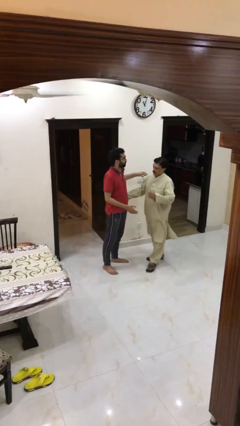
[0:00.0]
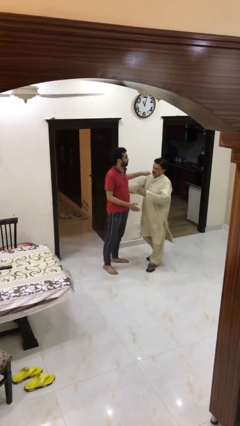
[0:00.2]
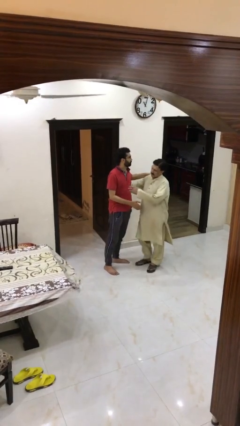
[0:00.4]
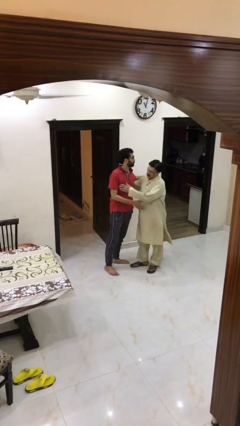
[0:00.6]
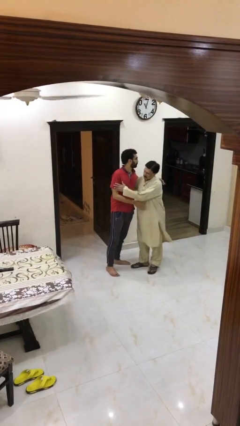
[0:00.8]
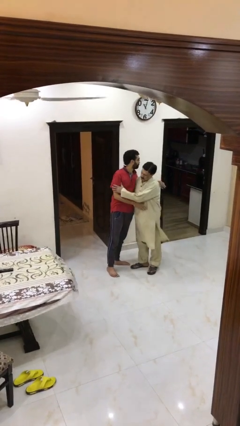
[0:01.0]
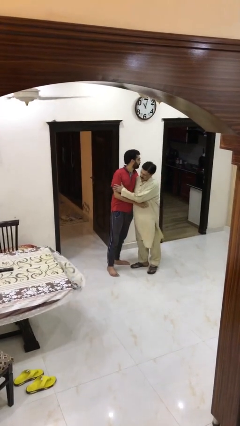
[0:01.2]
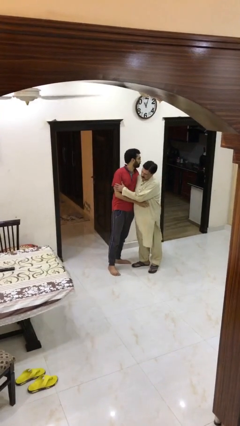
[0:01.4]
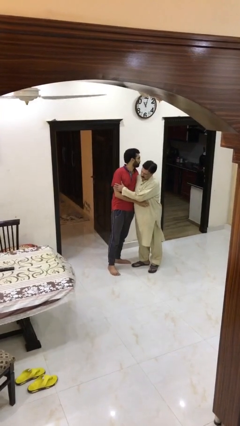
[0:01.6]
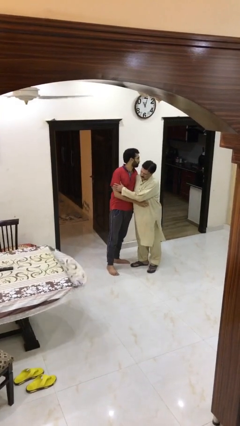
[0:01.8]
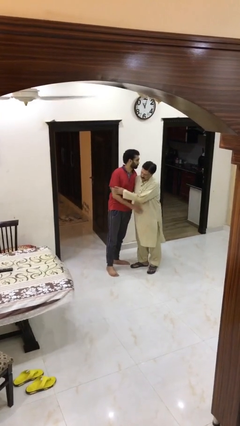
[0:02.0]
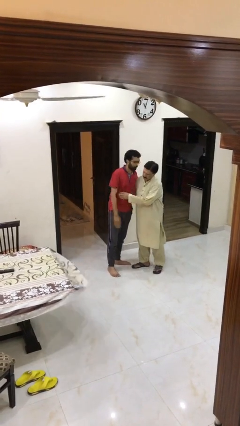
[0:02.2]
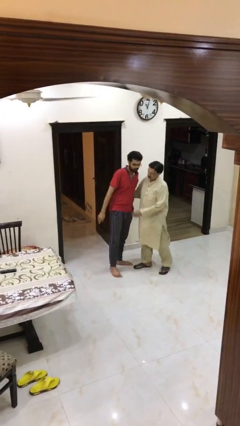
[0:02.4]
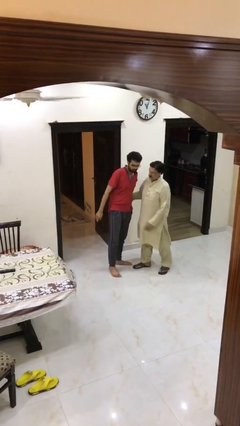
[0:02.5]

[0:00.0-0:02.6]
person embraces person

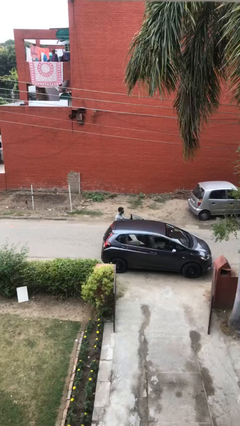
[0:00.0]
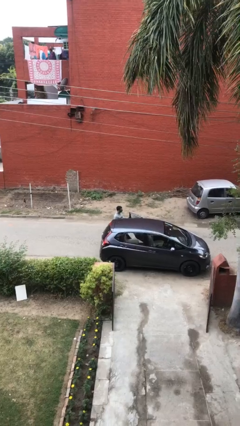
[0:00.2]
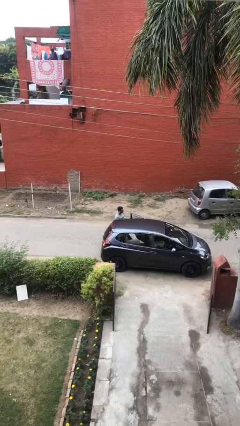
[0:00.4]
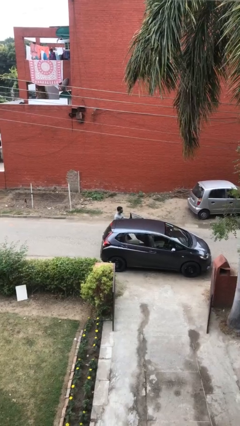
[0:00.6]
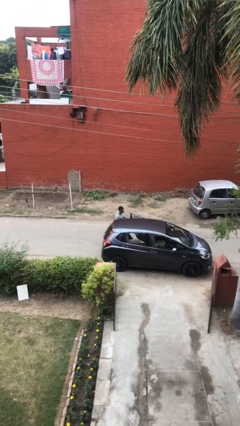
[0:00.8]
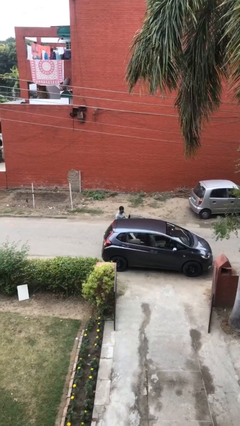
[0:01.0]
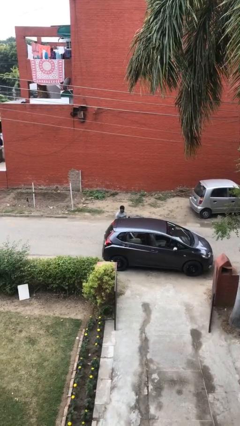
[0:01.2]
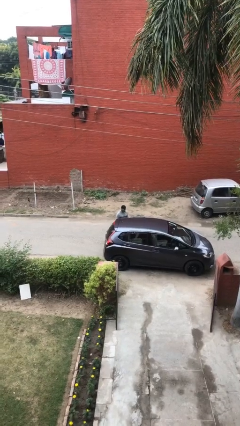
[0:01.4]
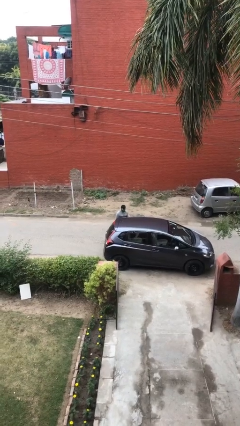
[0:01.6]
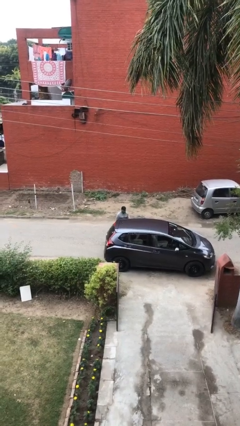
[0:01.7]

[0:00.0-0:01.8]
person closes car door

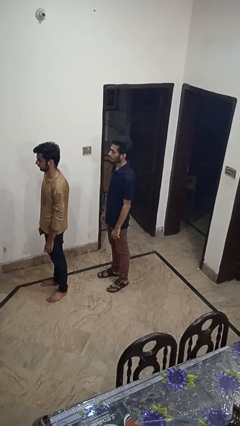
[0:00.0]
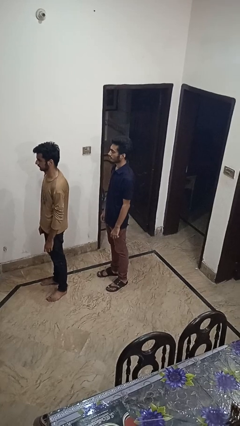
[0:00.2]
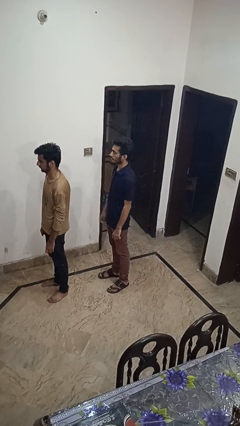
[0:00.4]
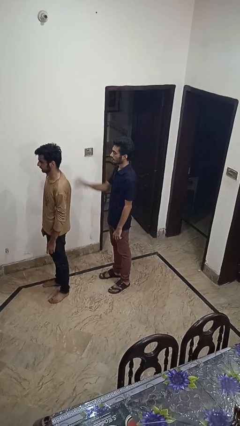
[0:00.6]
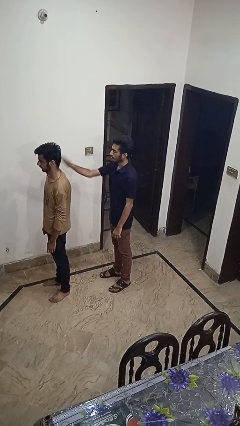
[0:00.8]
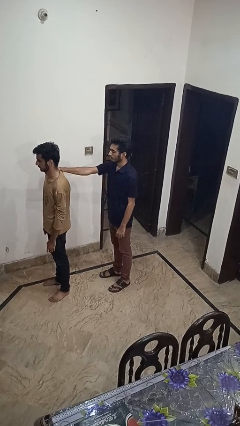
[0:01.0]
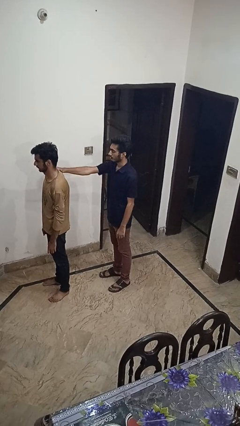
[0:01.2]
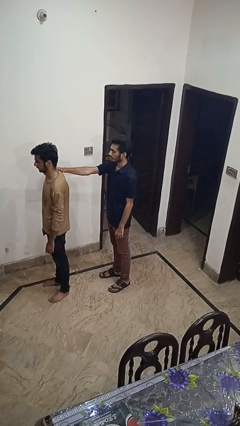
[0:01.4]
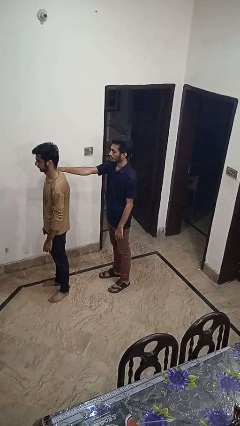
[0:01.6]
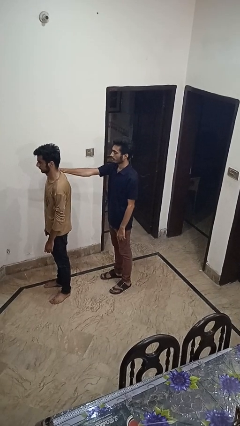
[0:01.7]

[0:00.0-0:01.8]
person grabs person by shoulder

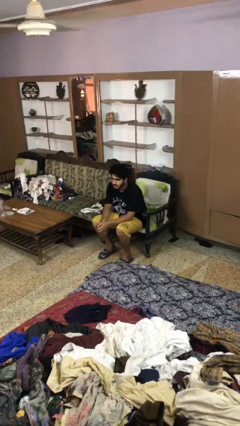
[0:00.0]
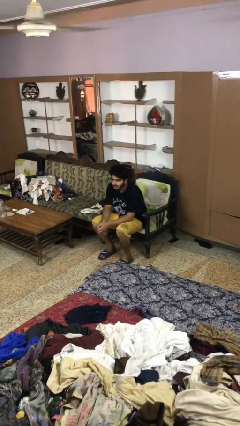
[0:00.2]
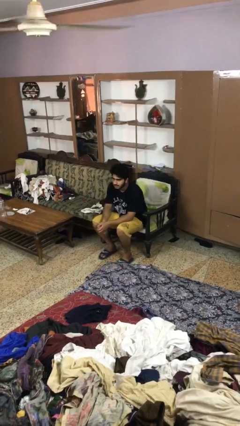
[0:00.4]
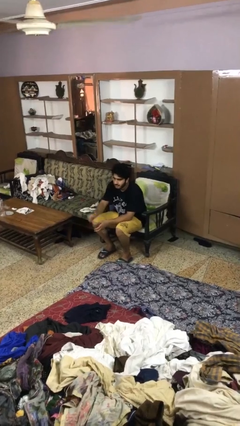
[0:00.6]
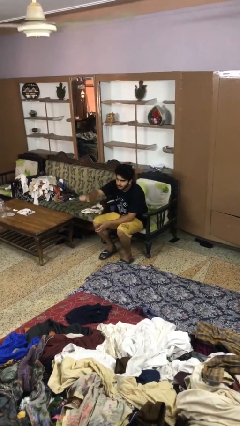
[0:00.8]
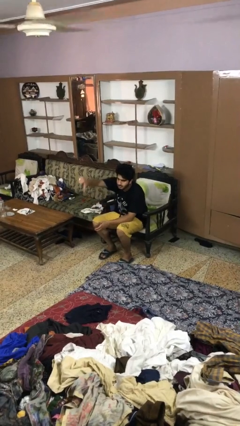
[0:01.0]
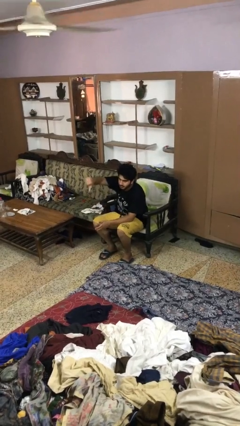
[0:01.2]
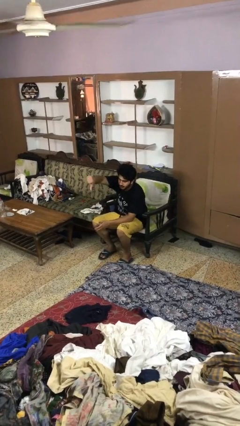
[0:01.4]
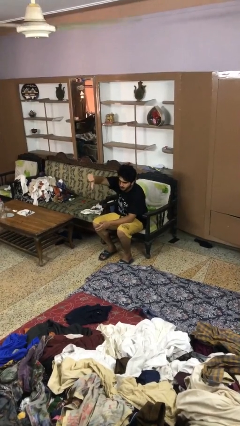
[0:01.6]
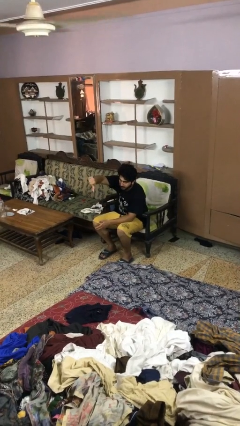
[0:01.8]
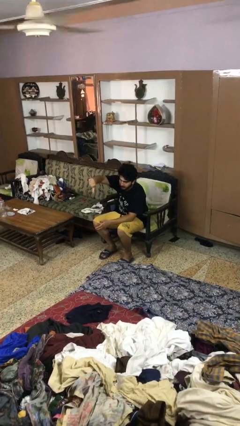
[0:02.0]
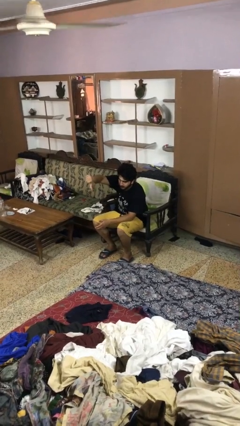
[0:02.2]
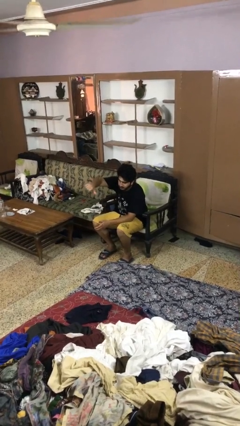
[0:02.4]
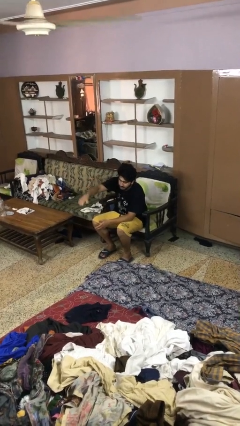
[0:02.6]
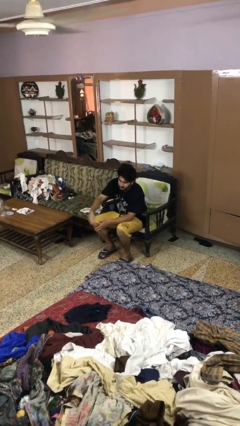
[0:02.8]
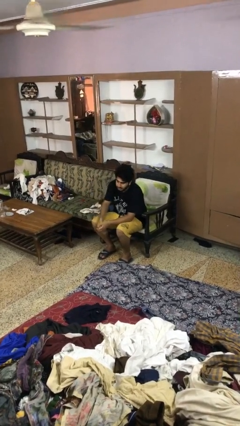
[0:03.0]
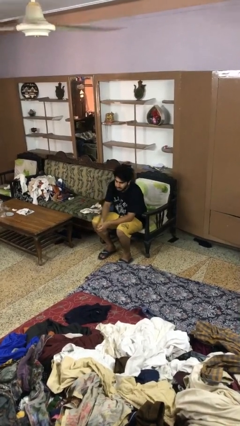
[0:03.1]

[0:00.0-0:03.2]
person gestures thumbs down

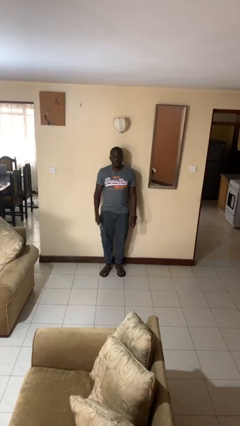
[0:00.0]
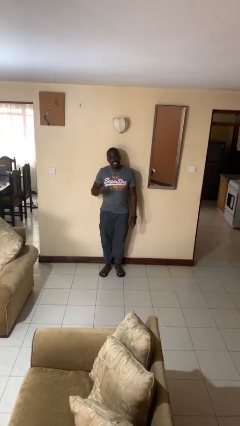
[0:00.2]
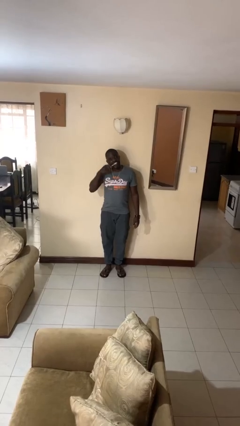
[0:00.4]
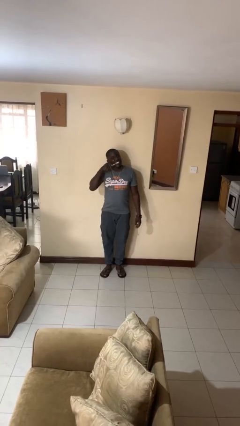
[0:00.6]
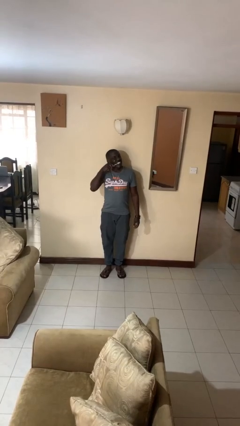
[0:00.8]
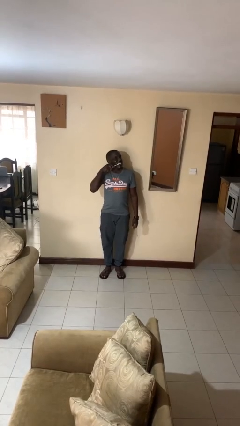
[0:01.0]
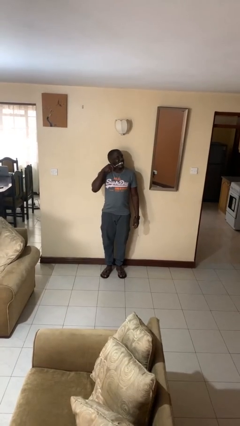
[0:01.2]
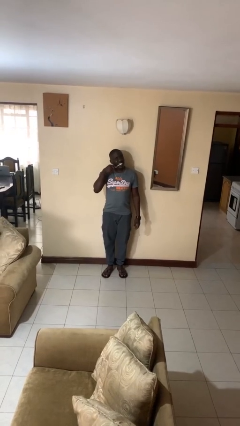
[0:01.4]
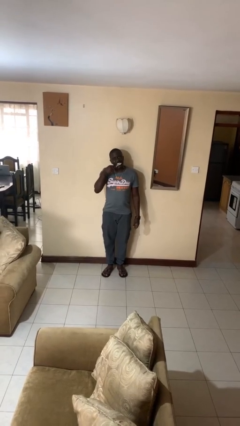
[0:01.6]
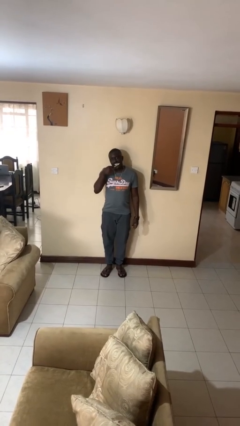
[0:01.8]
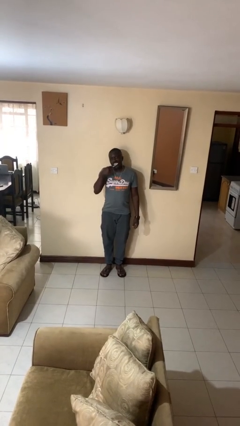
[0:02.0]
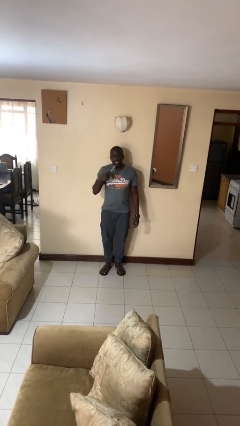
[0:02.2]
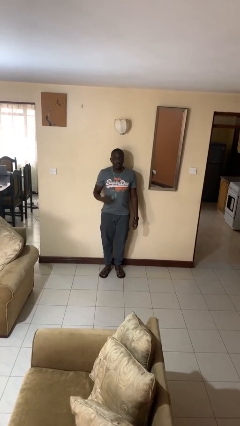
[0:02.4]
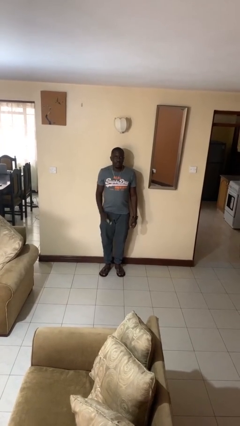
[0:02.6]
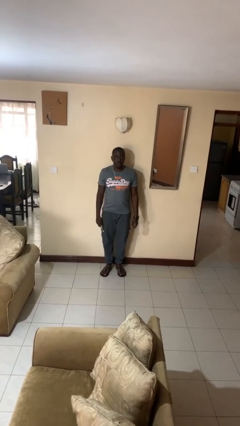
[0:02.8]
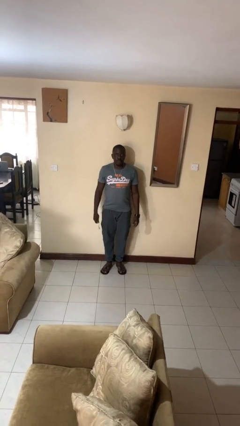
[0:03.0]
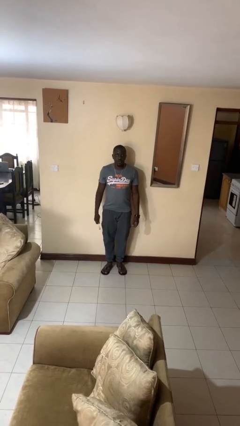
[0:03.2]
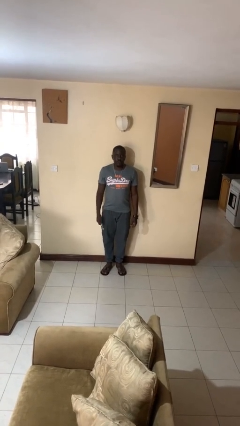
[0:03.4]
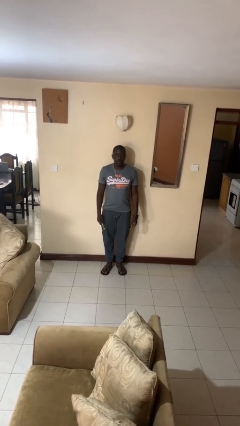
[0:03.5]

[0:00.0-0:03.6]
person brushes teeth

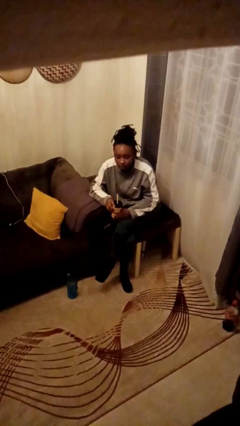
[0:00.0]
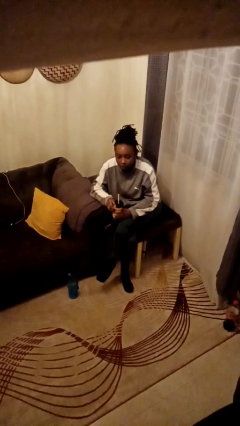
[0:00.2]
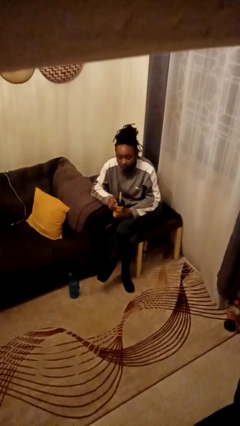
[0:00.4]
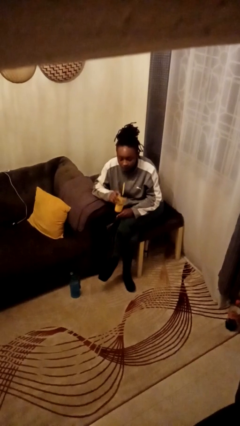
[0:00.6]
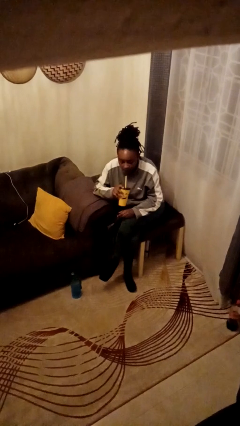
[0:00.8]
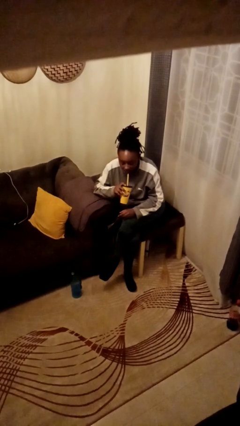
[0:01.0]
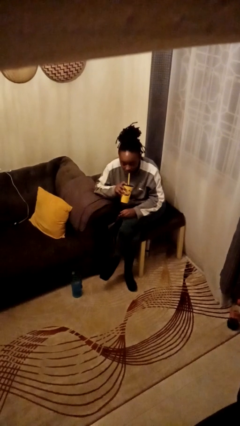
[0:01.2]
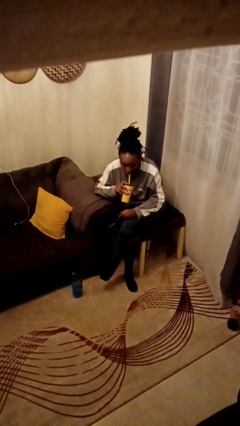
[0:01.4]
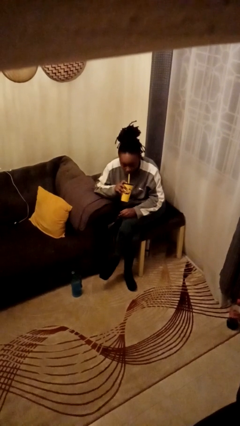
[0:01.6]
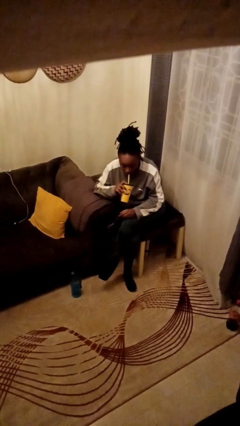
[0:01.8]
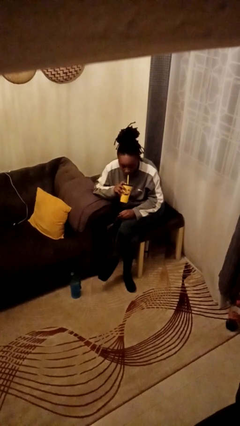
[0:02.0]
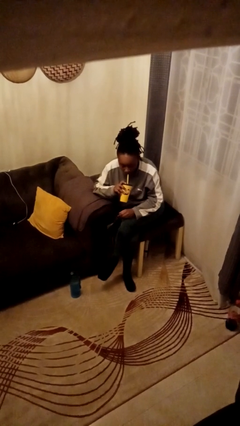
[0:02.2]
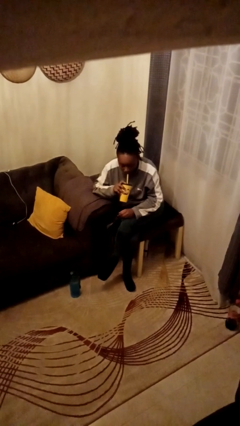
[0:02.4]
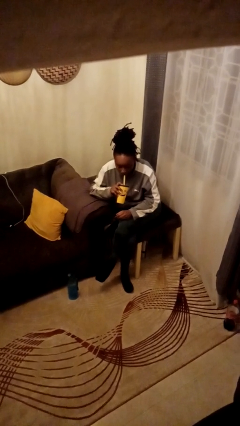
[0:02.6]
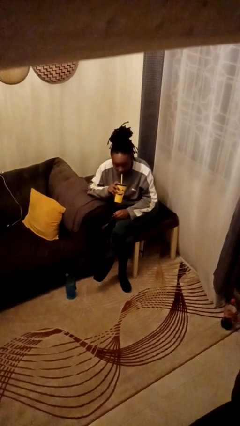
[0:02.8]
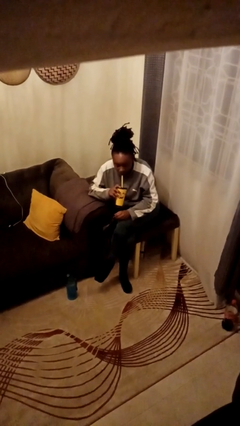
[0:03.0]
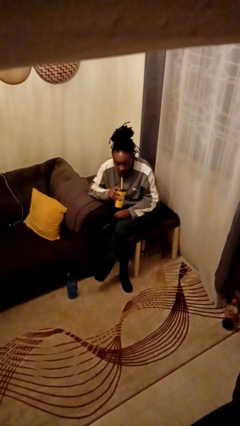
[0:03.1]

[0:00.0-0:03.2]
person drinks from straw

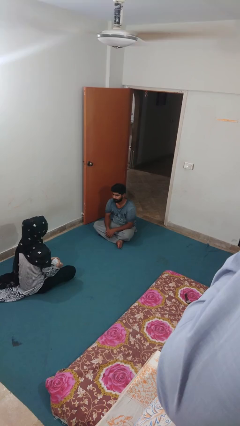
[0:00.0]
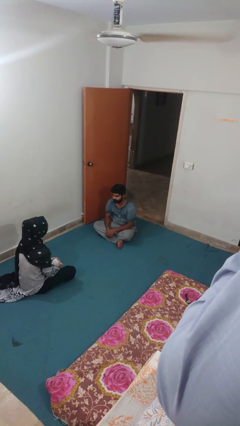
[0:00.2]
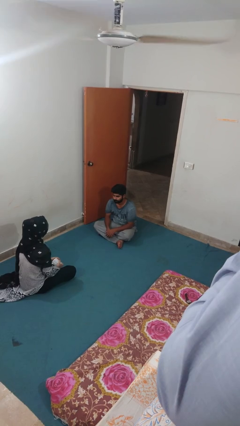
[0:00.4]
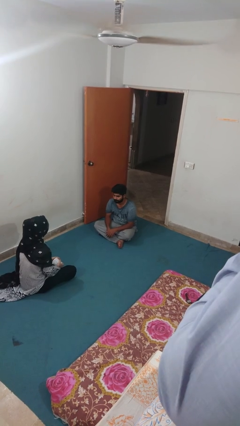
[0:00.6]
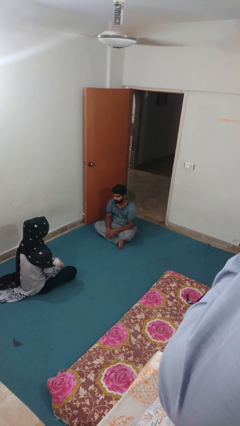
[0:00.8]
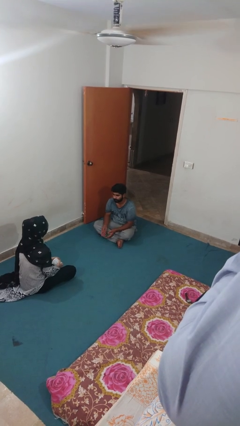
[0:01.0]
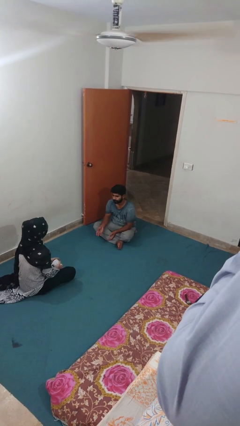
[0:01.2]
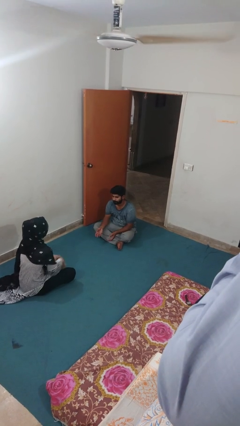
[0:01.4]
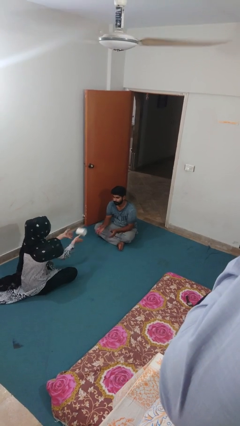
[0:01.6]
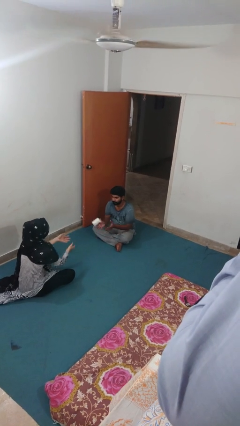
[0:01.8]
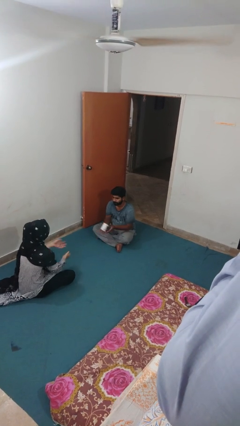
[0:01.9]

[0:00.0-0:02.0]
person catches object from person
